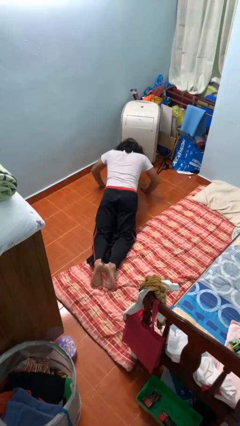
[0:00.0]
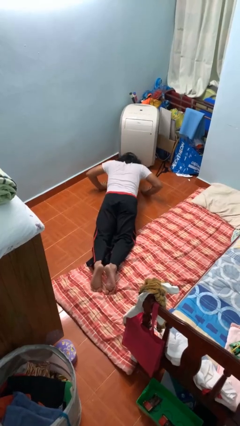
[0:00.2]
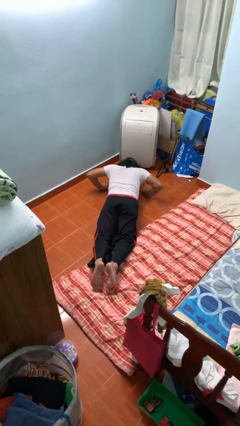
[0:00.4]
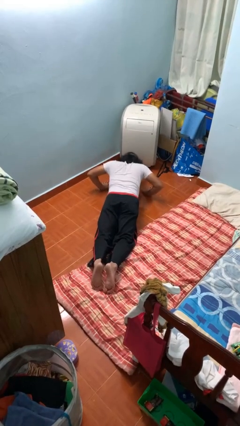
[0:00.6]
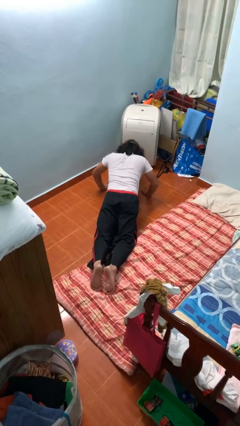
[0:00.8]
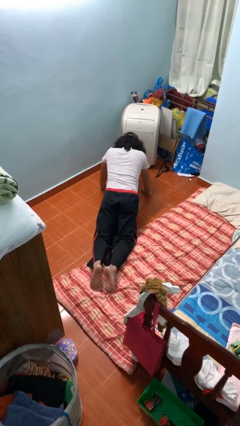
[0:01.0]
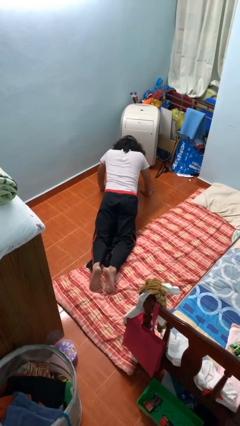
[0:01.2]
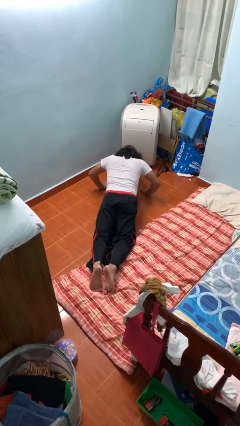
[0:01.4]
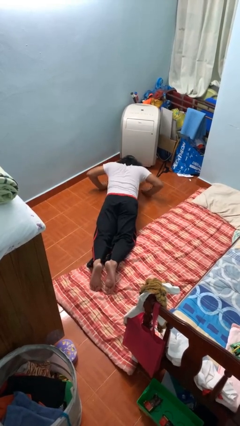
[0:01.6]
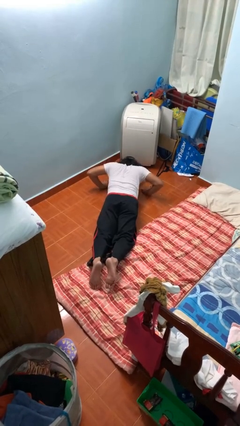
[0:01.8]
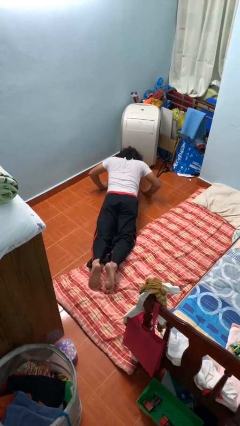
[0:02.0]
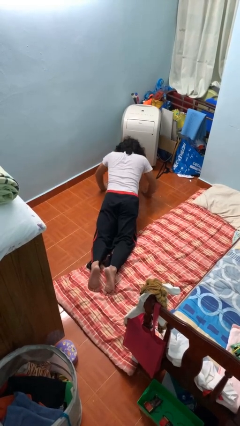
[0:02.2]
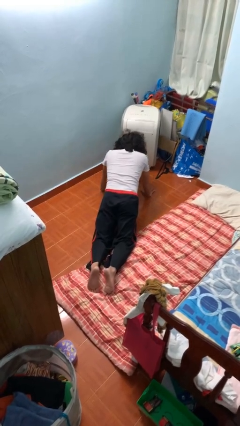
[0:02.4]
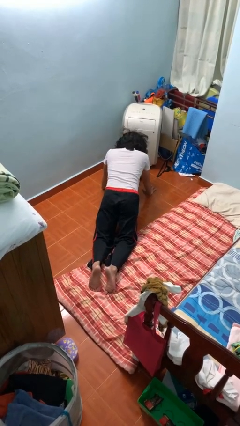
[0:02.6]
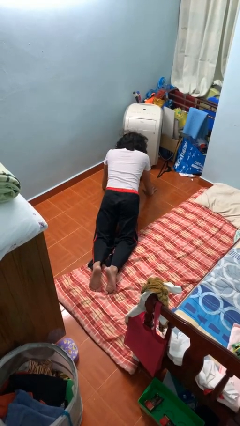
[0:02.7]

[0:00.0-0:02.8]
person exercises with pushup

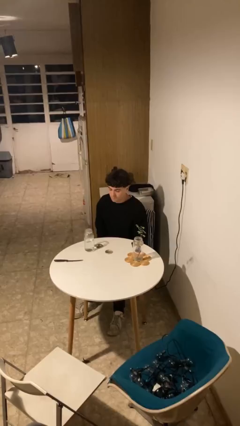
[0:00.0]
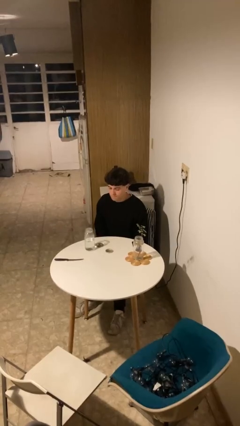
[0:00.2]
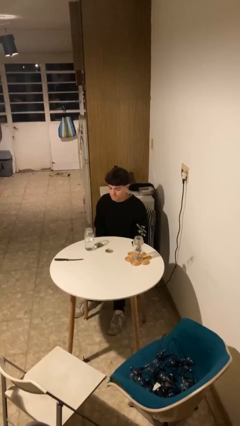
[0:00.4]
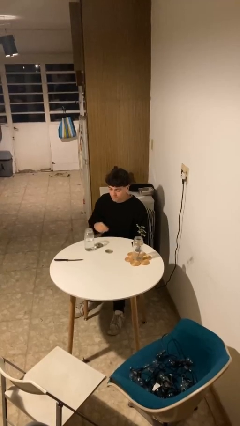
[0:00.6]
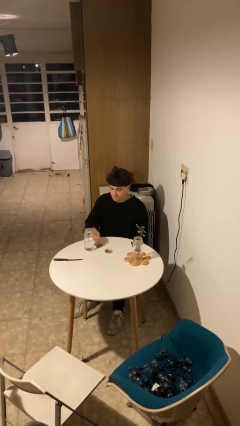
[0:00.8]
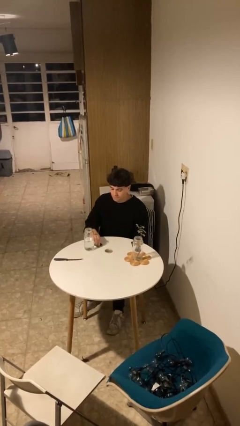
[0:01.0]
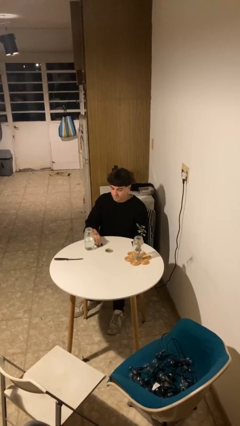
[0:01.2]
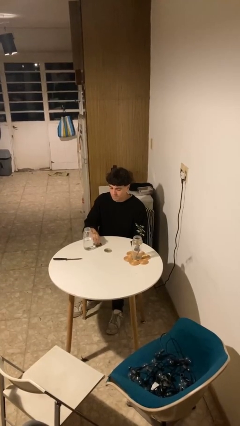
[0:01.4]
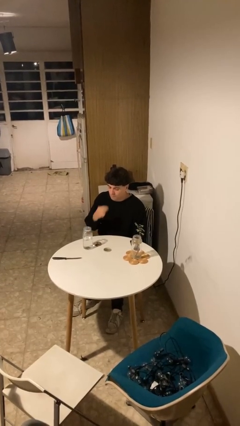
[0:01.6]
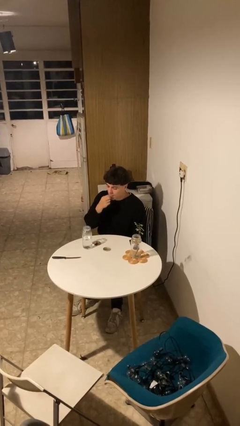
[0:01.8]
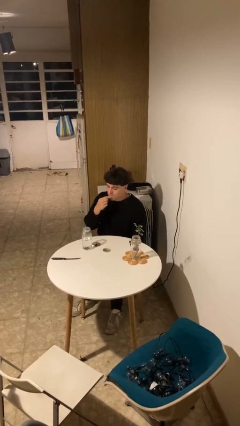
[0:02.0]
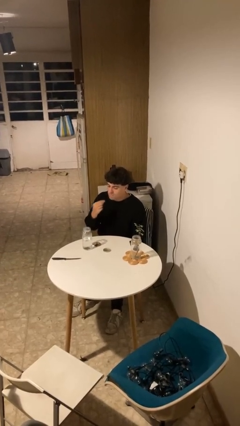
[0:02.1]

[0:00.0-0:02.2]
person takes medicine pills

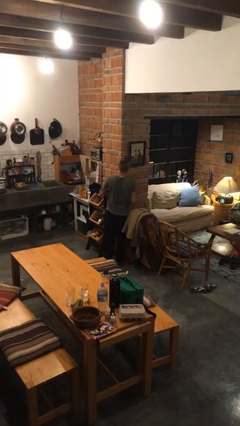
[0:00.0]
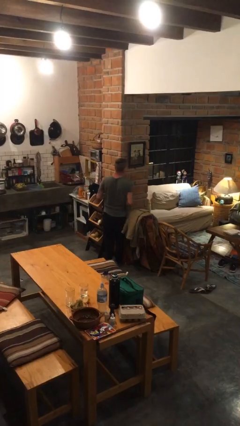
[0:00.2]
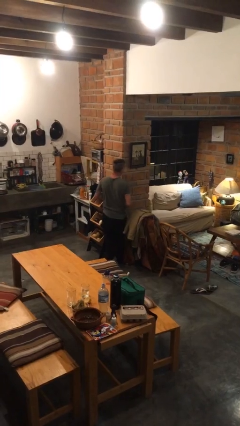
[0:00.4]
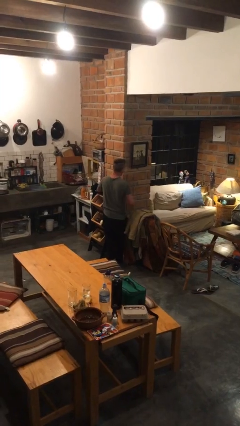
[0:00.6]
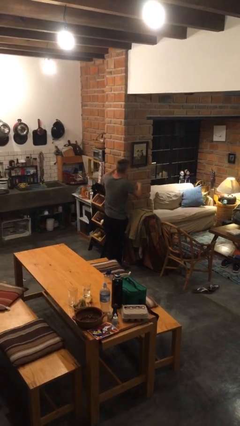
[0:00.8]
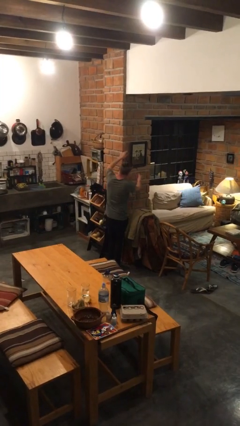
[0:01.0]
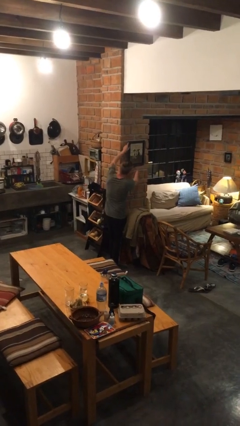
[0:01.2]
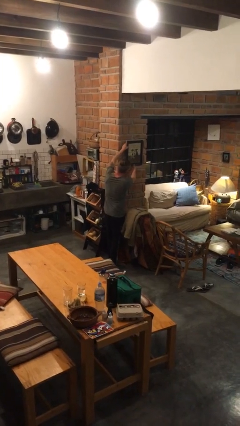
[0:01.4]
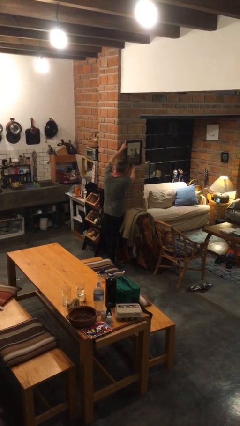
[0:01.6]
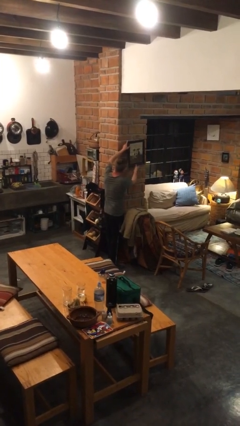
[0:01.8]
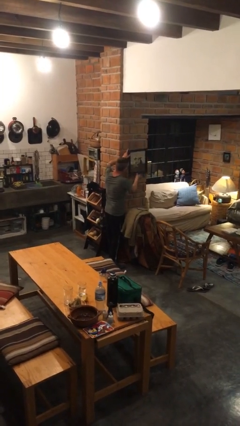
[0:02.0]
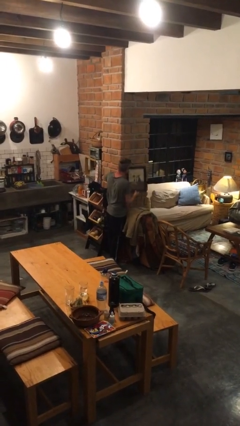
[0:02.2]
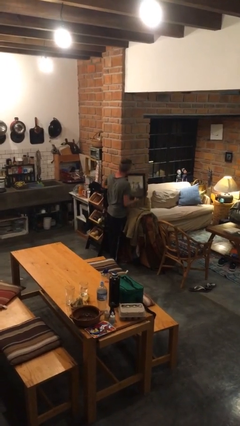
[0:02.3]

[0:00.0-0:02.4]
person takes down picture frame

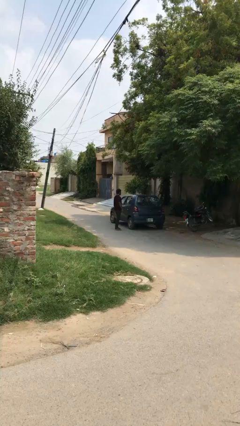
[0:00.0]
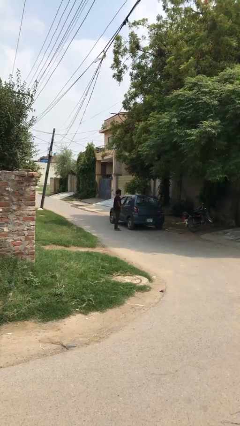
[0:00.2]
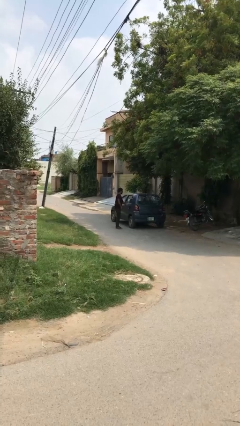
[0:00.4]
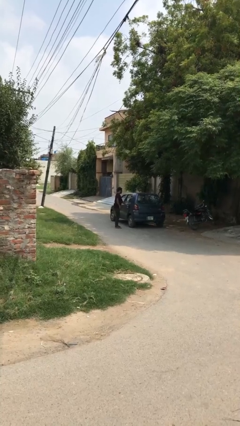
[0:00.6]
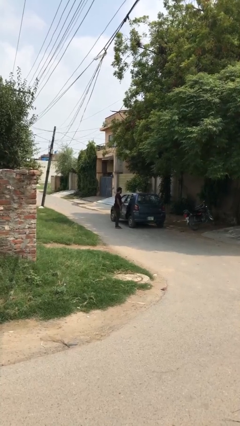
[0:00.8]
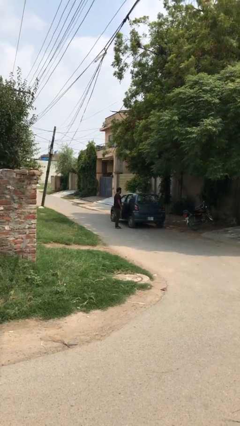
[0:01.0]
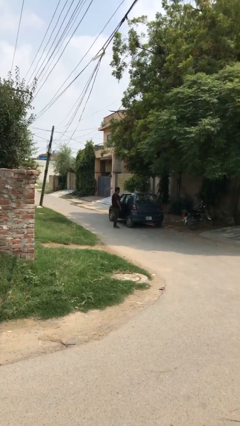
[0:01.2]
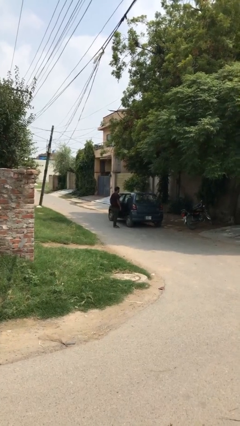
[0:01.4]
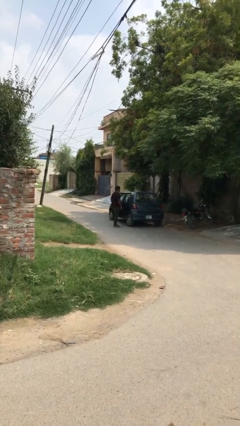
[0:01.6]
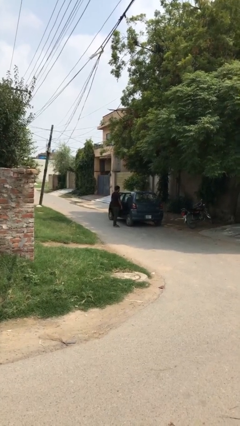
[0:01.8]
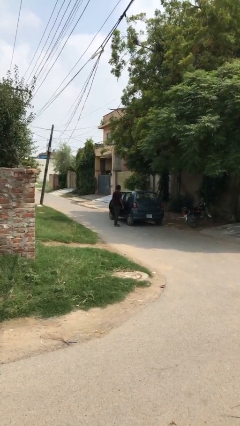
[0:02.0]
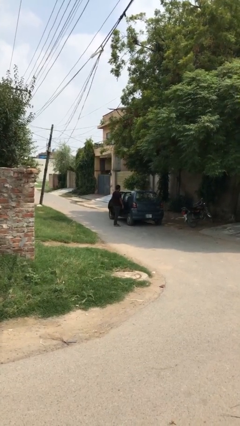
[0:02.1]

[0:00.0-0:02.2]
person opens car door

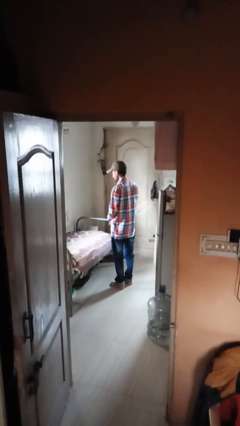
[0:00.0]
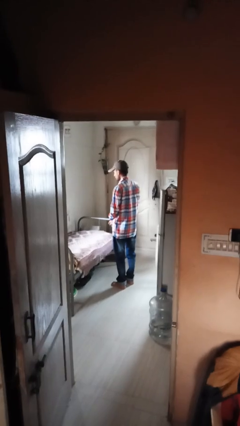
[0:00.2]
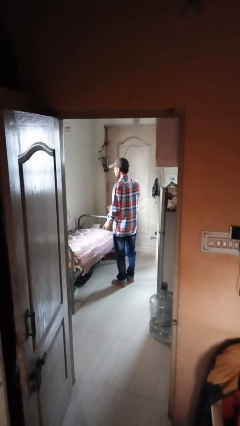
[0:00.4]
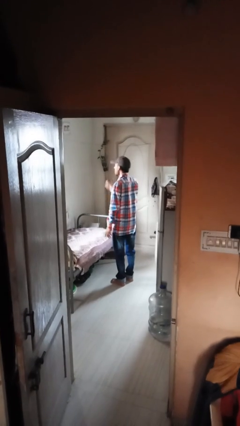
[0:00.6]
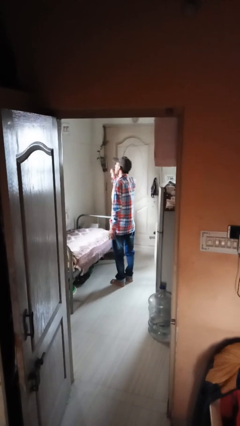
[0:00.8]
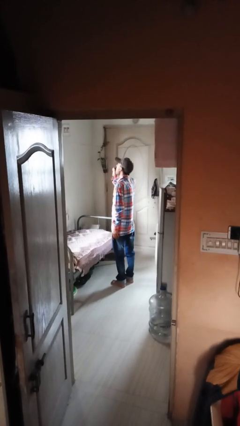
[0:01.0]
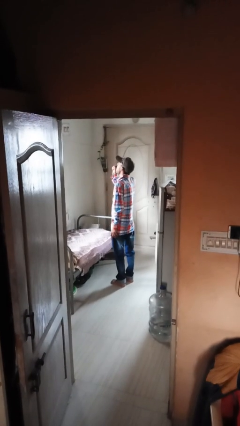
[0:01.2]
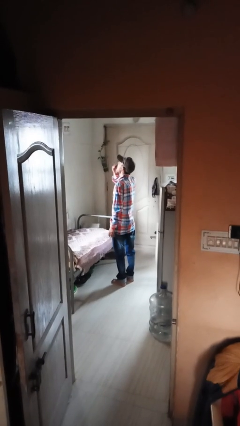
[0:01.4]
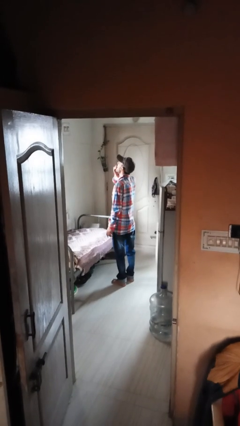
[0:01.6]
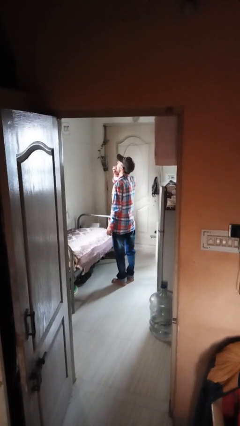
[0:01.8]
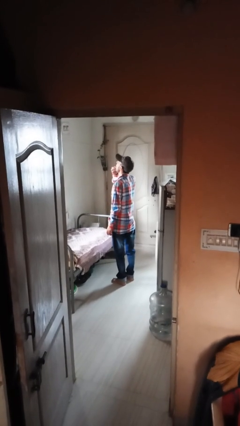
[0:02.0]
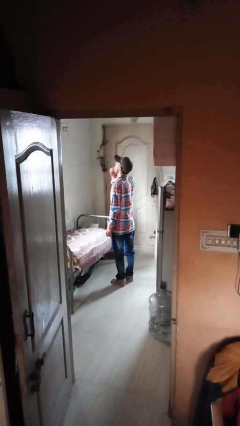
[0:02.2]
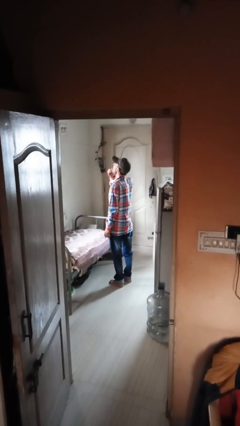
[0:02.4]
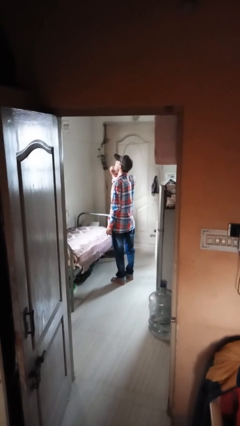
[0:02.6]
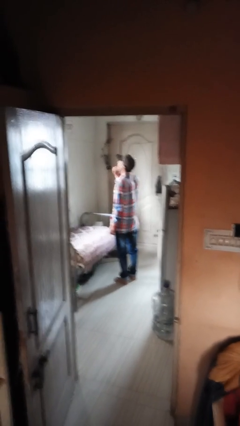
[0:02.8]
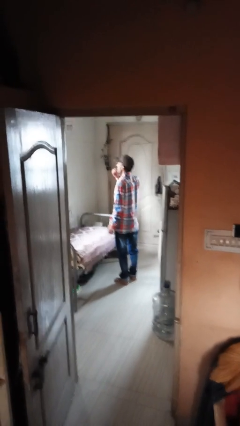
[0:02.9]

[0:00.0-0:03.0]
person yawns

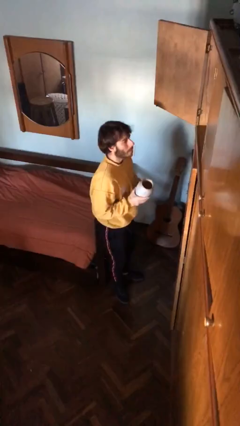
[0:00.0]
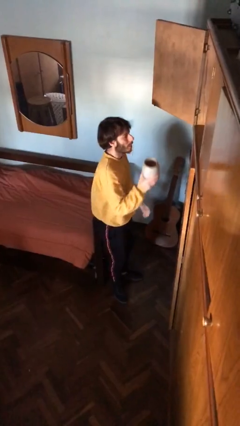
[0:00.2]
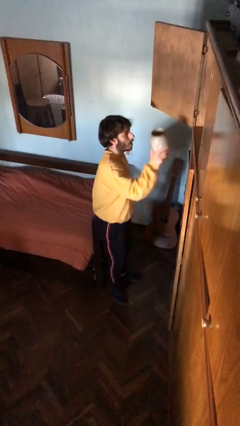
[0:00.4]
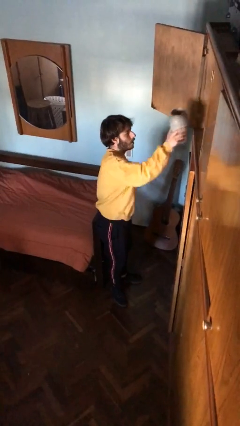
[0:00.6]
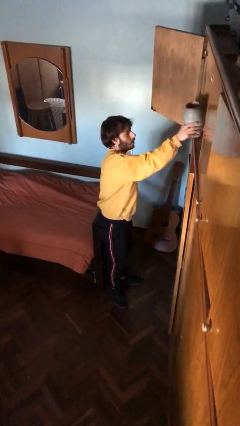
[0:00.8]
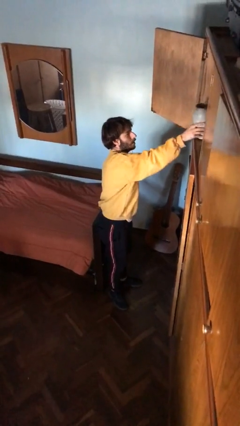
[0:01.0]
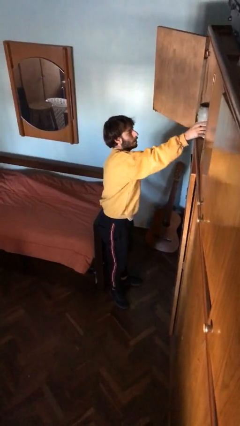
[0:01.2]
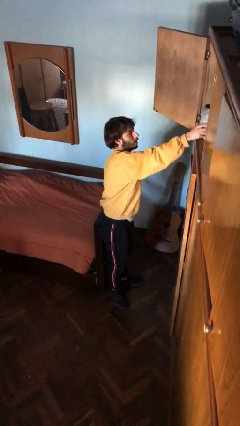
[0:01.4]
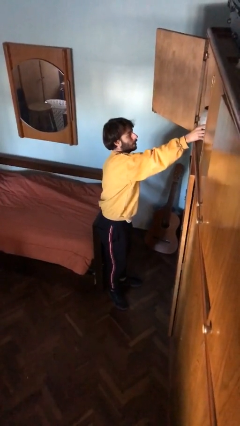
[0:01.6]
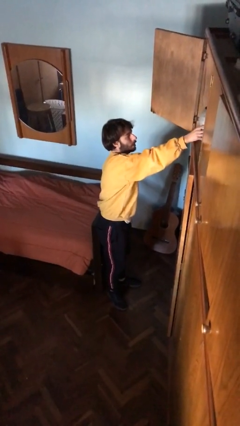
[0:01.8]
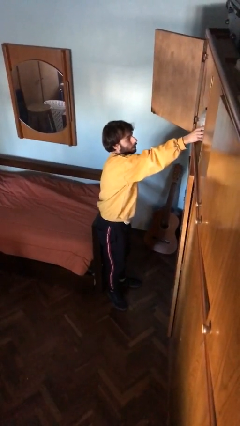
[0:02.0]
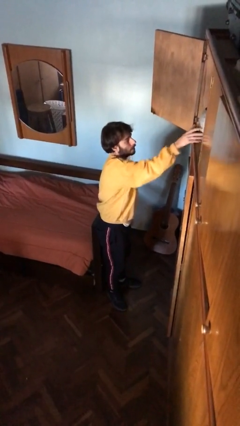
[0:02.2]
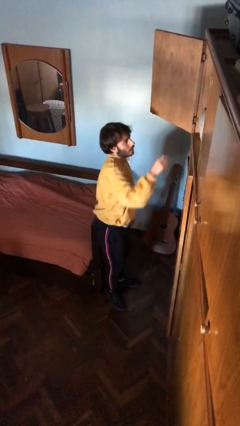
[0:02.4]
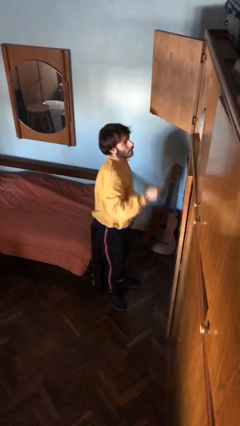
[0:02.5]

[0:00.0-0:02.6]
person puts down object into cabinet

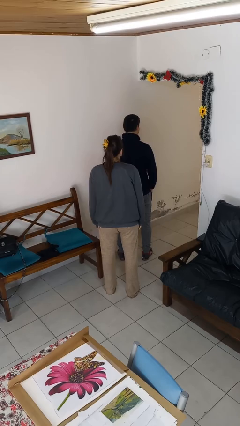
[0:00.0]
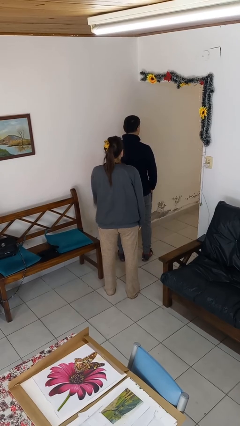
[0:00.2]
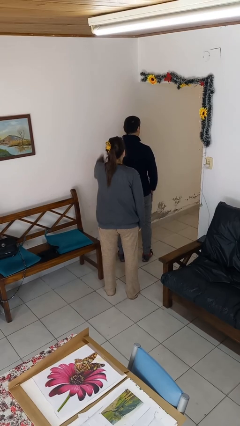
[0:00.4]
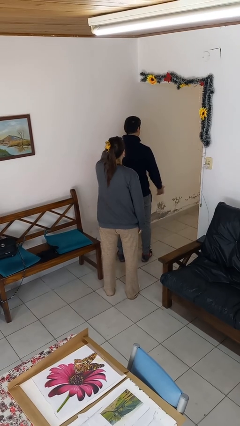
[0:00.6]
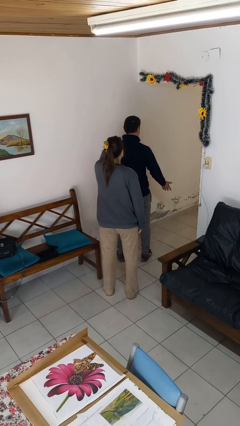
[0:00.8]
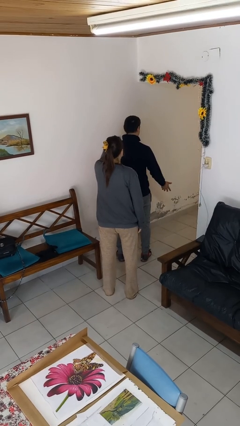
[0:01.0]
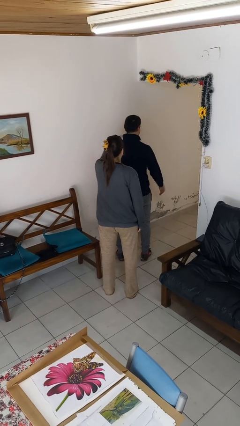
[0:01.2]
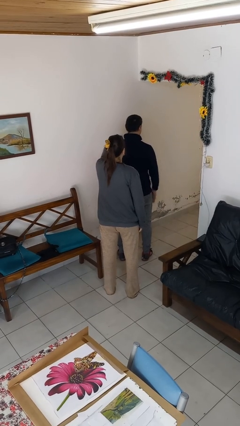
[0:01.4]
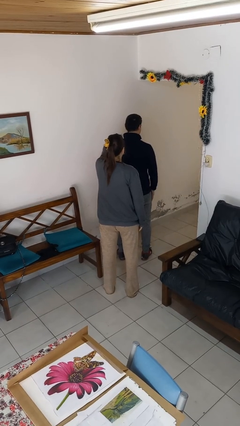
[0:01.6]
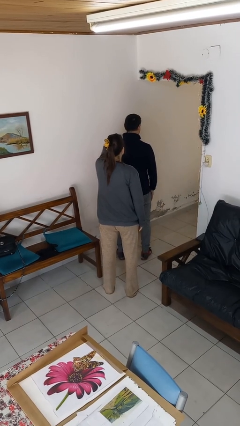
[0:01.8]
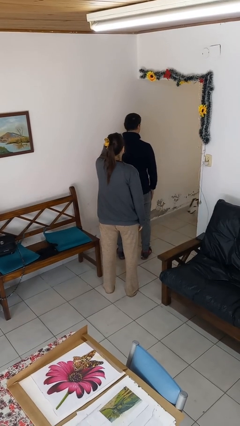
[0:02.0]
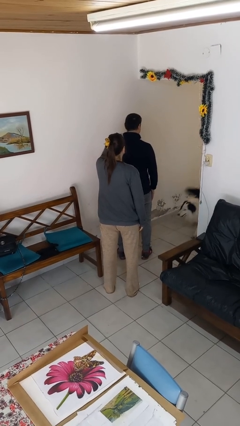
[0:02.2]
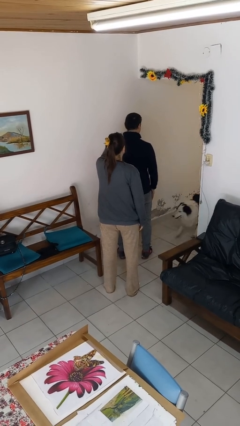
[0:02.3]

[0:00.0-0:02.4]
person touches back of person
